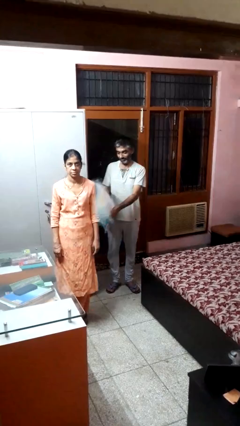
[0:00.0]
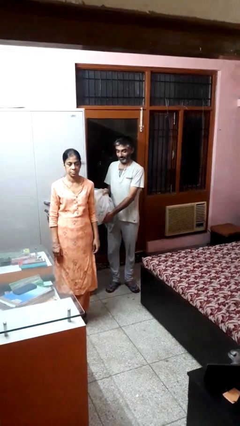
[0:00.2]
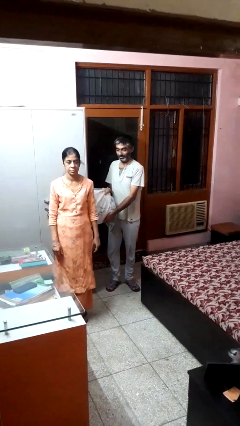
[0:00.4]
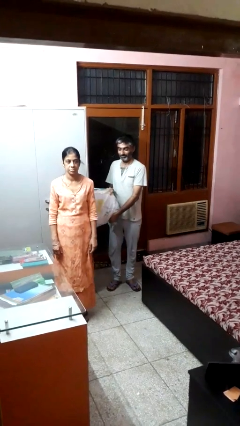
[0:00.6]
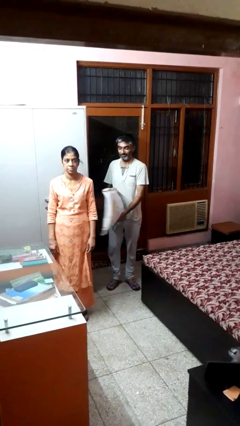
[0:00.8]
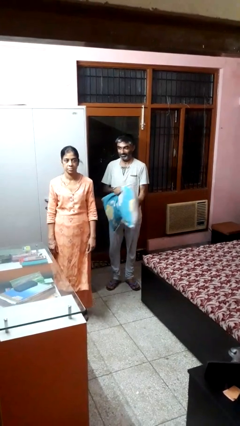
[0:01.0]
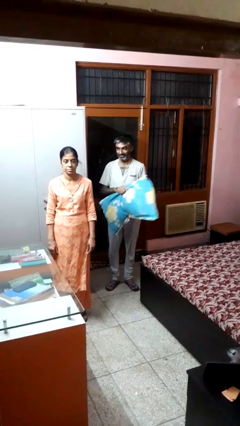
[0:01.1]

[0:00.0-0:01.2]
person hits person with pillow

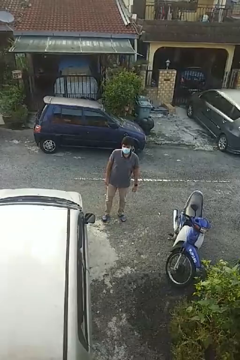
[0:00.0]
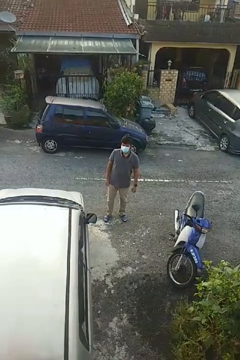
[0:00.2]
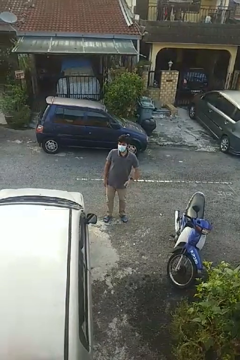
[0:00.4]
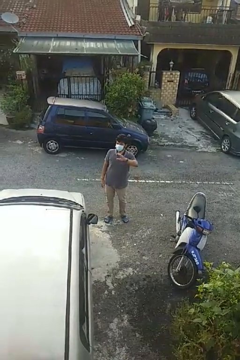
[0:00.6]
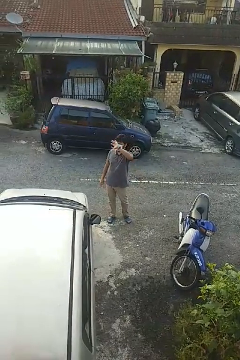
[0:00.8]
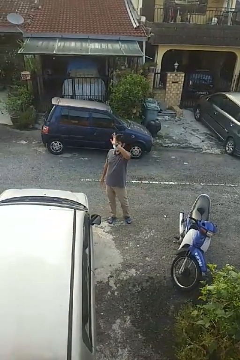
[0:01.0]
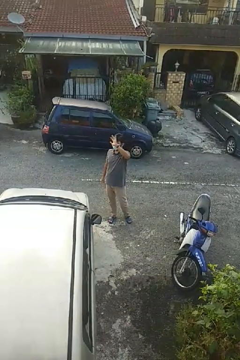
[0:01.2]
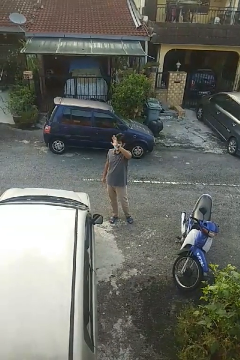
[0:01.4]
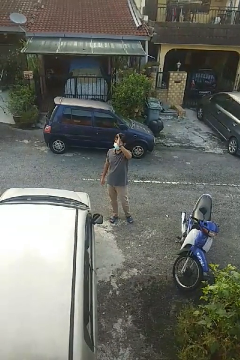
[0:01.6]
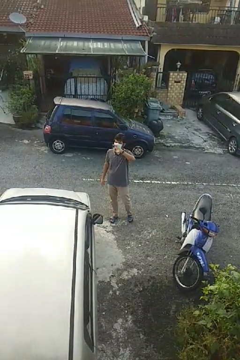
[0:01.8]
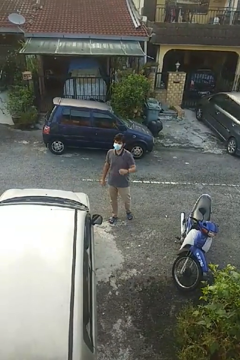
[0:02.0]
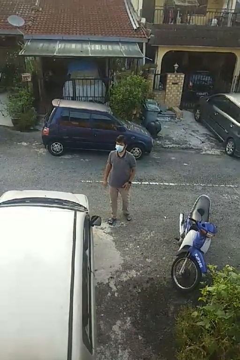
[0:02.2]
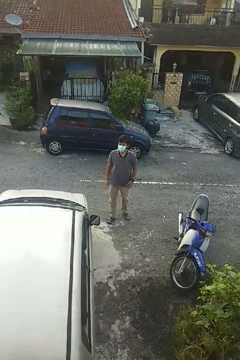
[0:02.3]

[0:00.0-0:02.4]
person waves at person

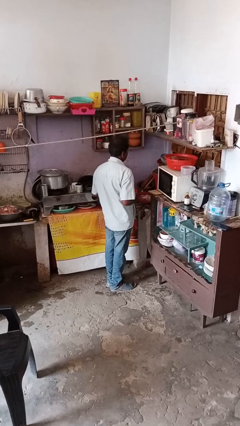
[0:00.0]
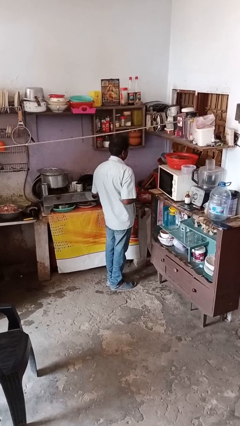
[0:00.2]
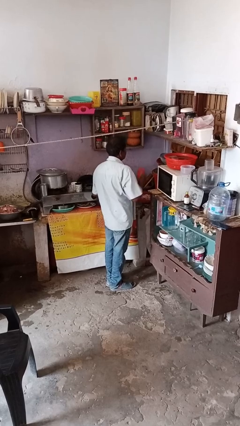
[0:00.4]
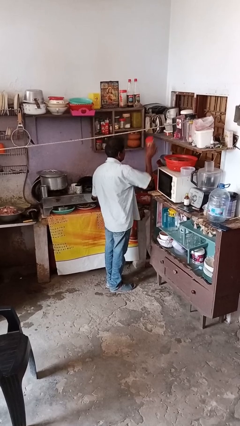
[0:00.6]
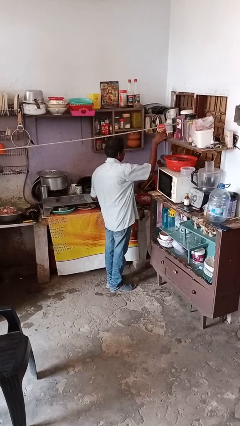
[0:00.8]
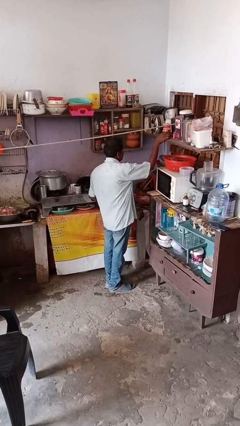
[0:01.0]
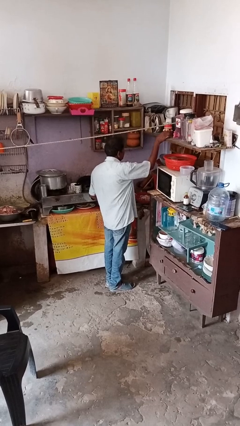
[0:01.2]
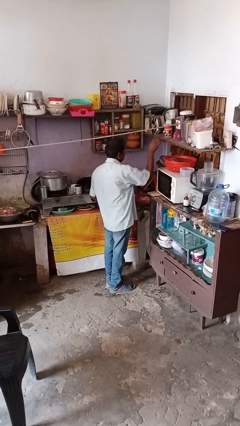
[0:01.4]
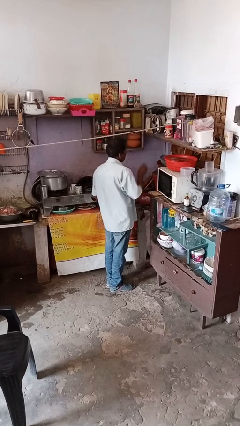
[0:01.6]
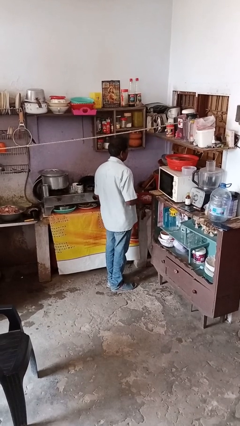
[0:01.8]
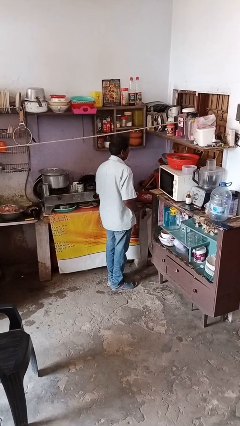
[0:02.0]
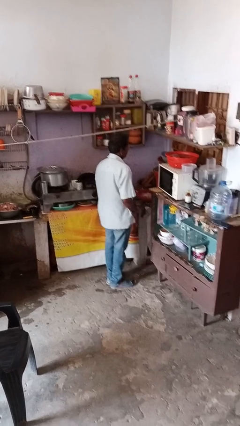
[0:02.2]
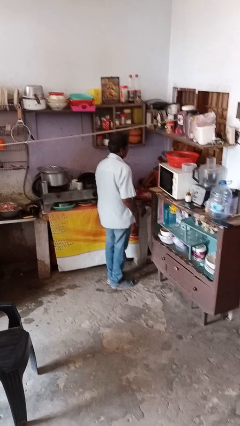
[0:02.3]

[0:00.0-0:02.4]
person puts down object on shelf

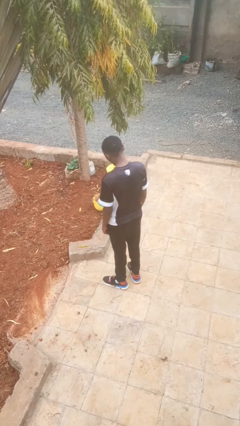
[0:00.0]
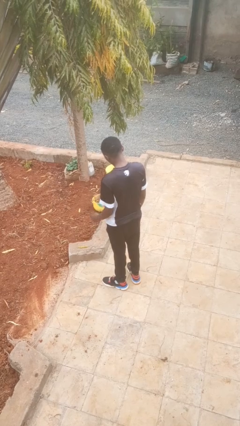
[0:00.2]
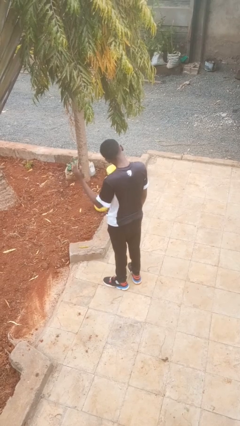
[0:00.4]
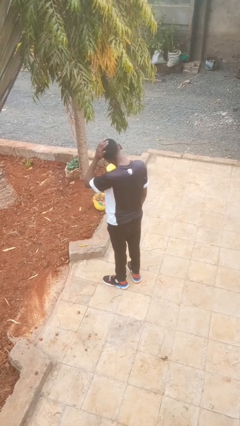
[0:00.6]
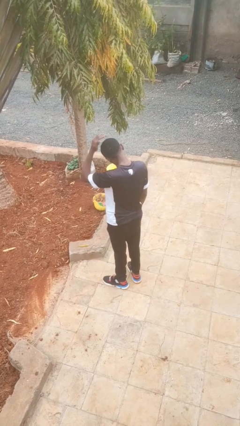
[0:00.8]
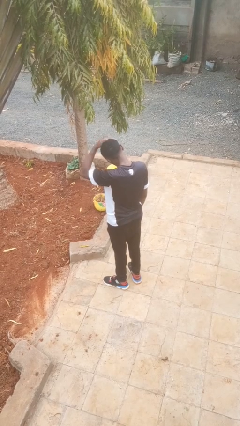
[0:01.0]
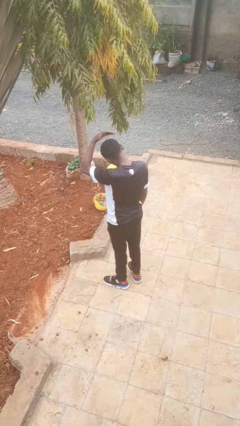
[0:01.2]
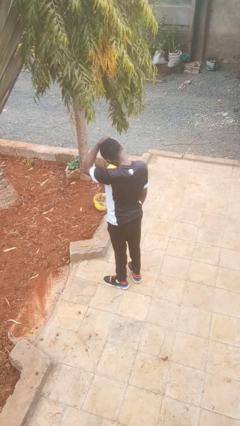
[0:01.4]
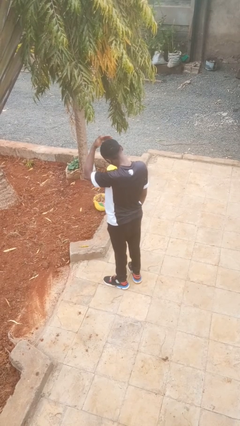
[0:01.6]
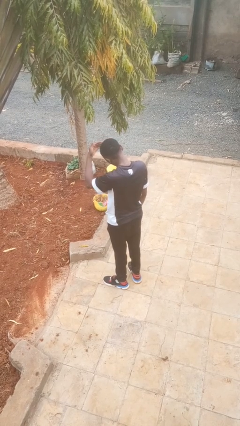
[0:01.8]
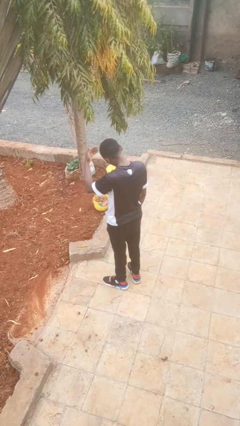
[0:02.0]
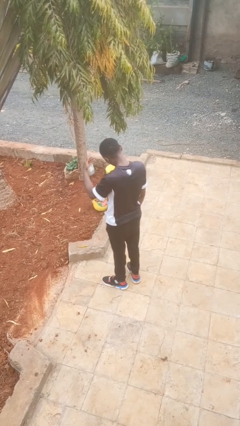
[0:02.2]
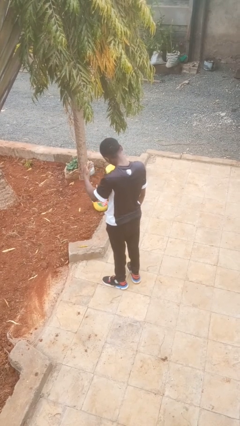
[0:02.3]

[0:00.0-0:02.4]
person pats head

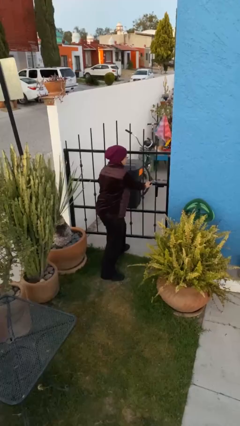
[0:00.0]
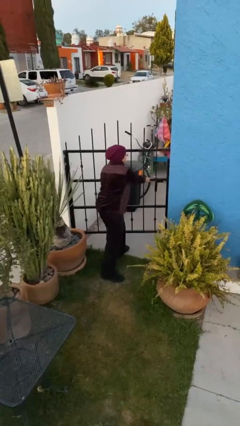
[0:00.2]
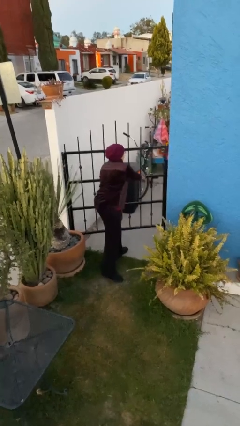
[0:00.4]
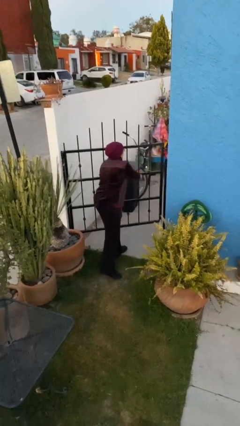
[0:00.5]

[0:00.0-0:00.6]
person opens facility door

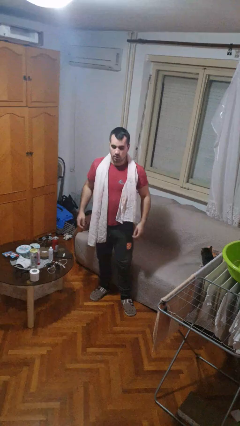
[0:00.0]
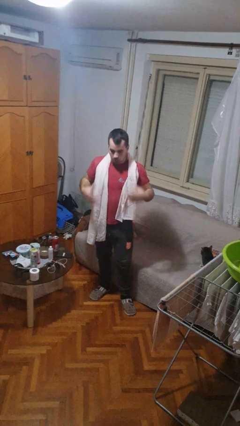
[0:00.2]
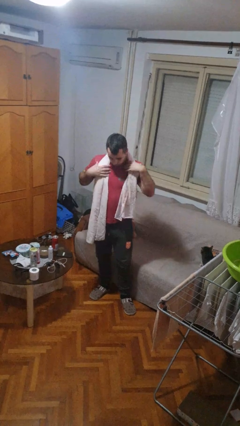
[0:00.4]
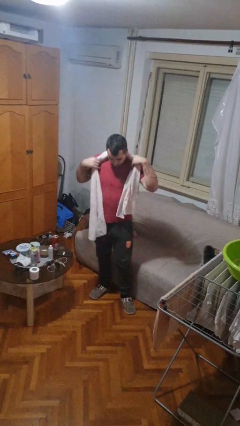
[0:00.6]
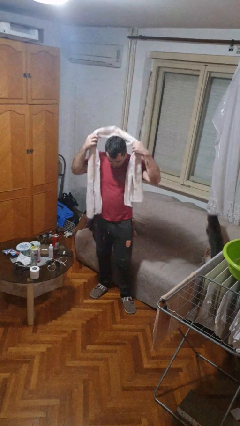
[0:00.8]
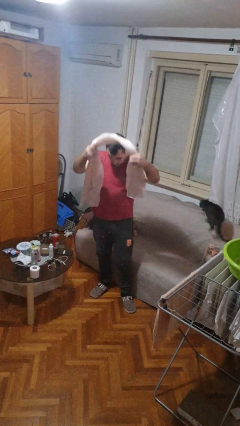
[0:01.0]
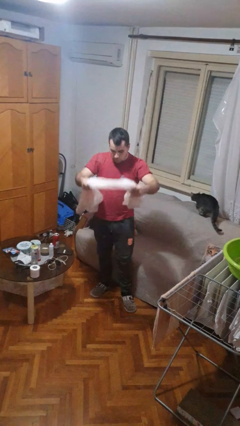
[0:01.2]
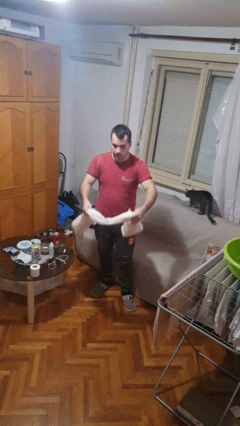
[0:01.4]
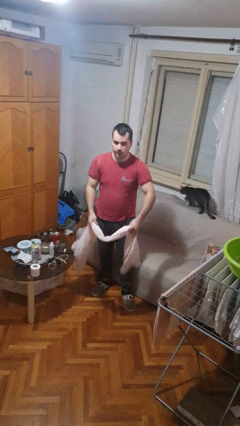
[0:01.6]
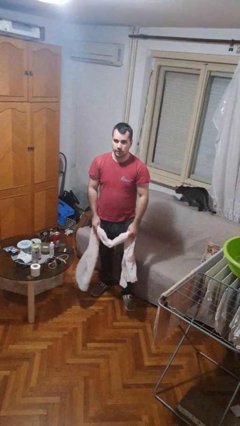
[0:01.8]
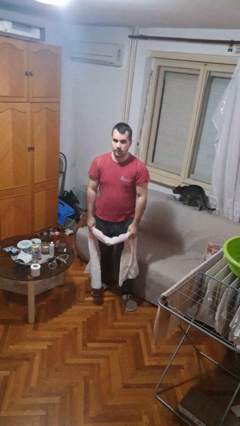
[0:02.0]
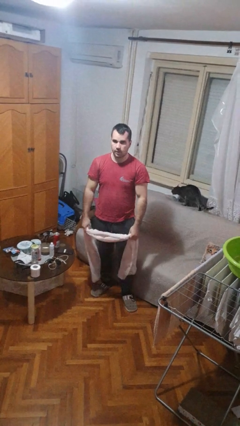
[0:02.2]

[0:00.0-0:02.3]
person takes off scarf

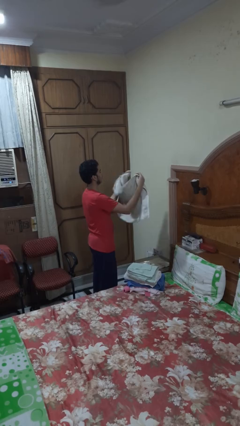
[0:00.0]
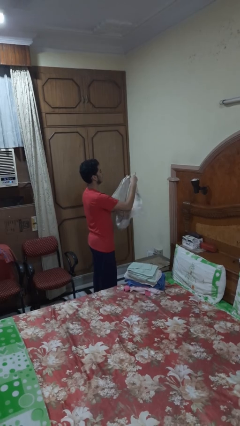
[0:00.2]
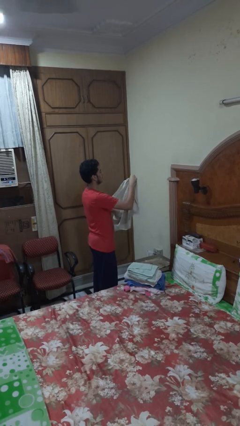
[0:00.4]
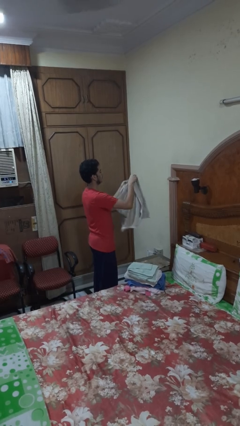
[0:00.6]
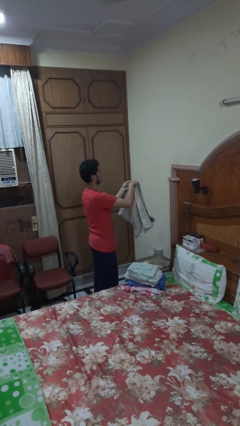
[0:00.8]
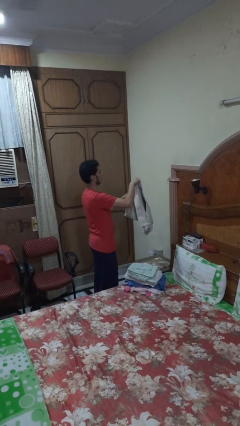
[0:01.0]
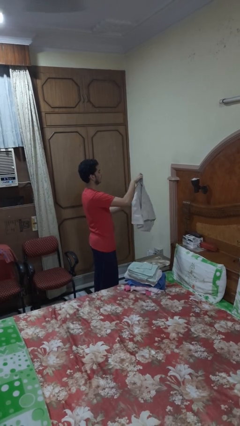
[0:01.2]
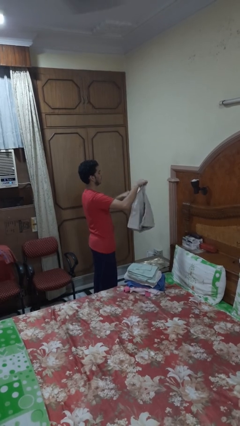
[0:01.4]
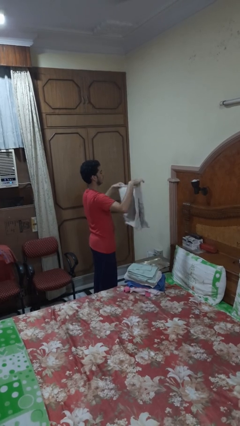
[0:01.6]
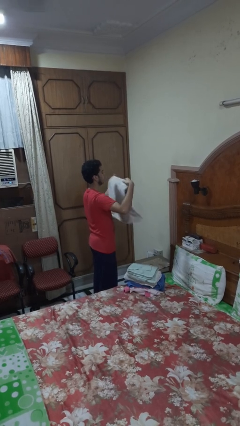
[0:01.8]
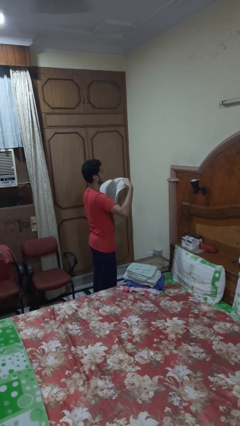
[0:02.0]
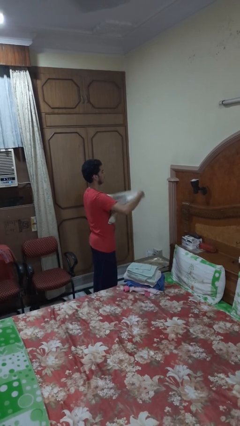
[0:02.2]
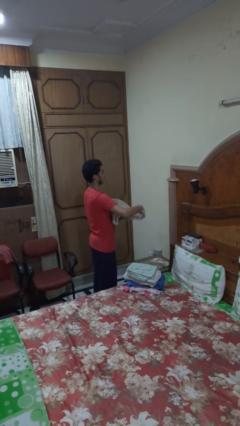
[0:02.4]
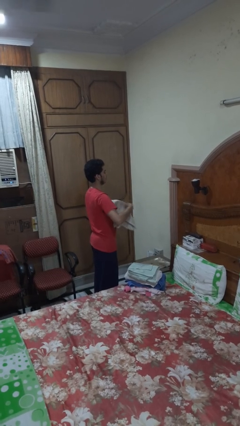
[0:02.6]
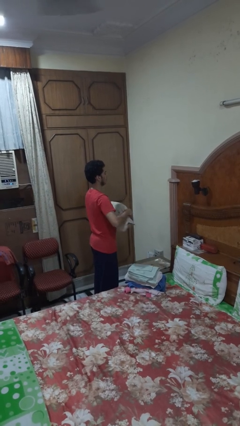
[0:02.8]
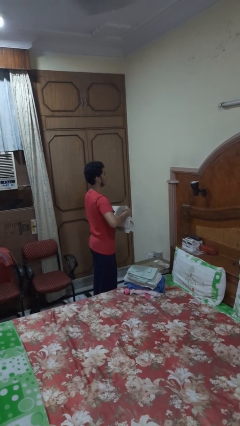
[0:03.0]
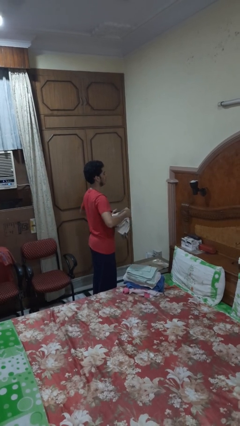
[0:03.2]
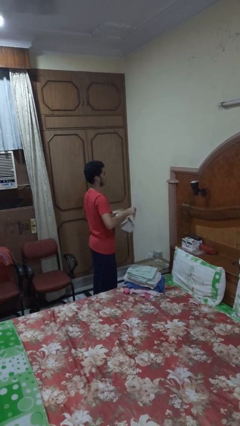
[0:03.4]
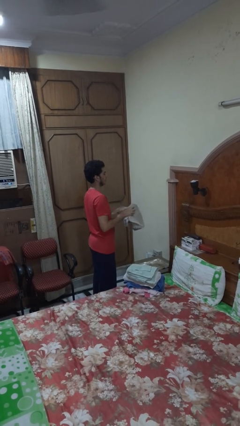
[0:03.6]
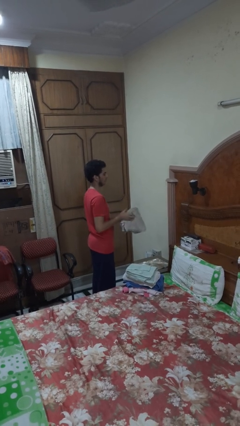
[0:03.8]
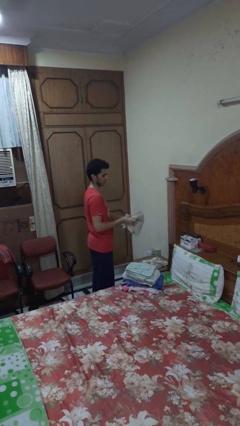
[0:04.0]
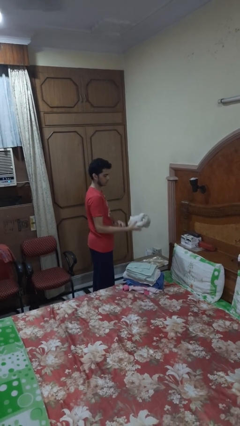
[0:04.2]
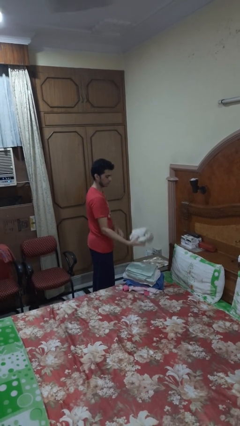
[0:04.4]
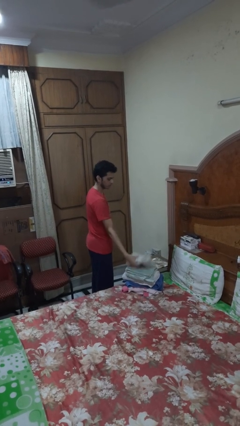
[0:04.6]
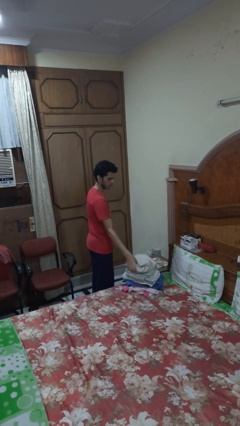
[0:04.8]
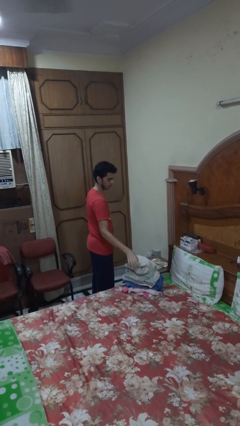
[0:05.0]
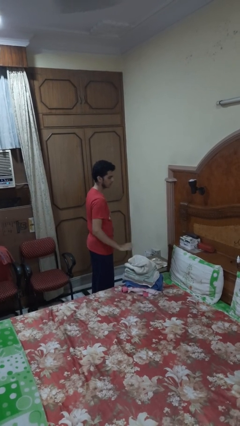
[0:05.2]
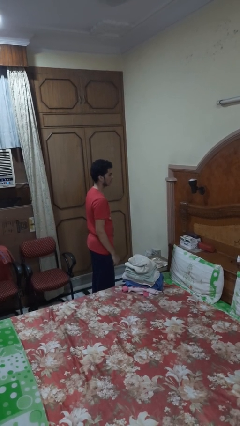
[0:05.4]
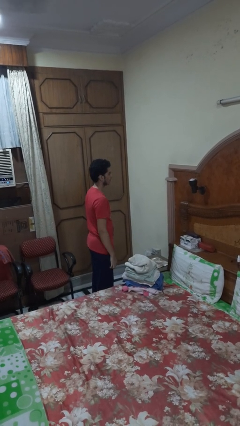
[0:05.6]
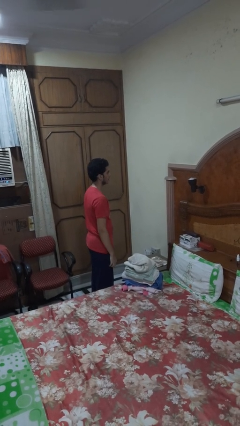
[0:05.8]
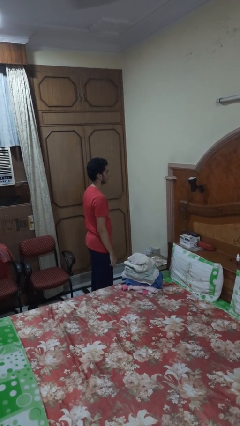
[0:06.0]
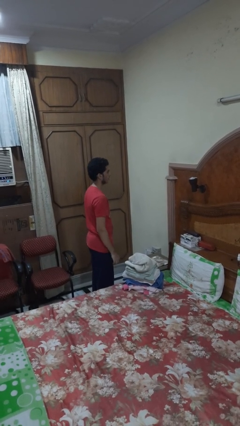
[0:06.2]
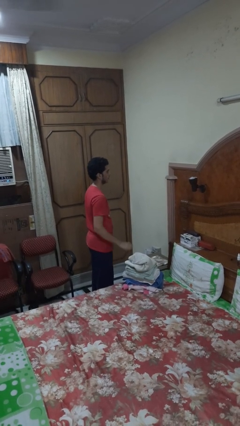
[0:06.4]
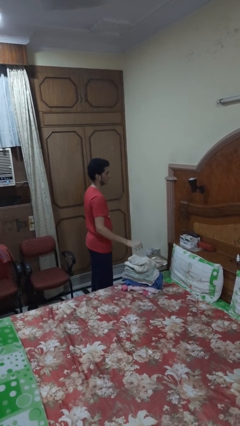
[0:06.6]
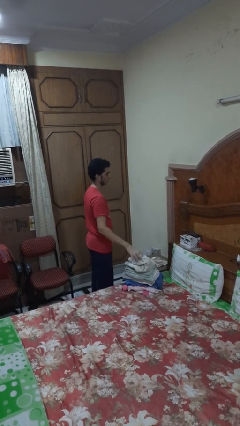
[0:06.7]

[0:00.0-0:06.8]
person folds towel

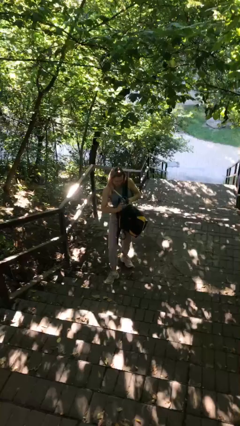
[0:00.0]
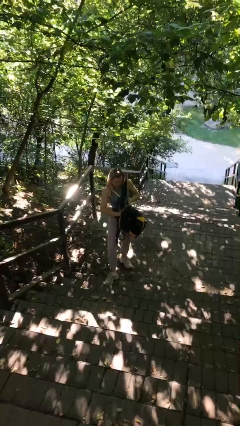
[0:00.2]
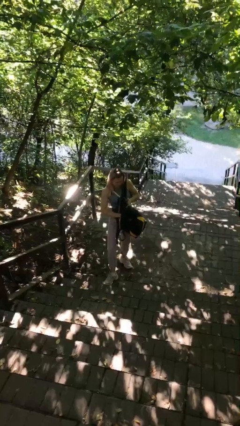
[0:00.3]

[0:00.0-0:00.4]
person puts object into backpack
